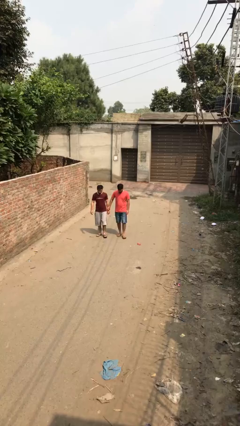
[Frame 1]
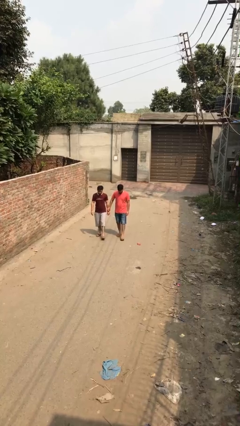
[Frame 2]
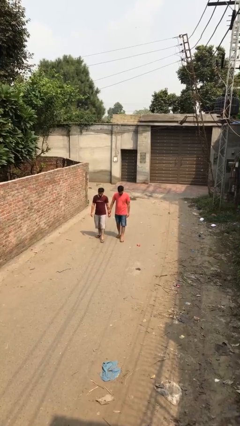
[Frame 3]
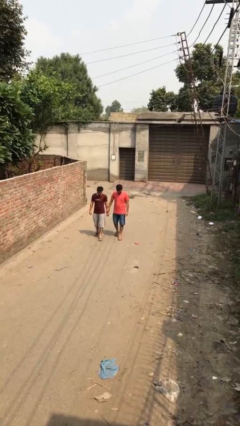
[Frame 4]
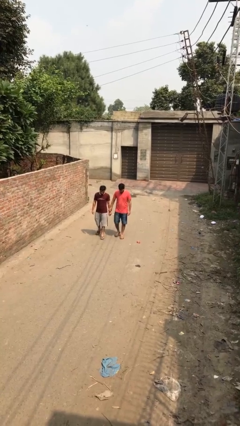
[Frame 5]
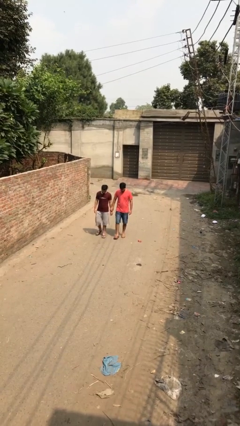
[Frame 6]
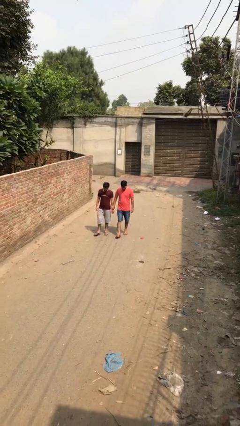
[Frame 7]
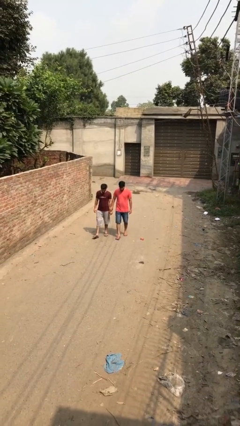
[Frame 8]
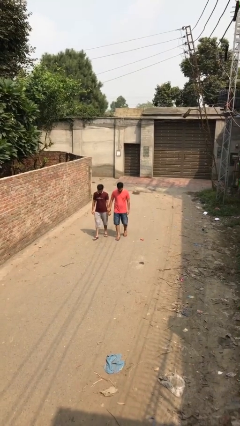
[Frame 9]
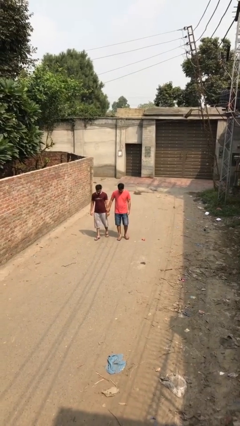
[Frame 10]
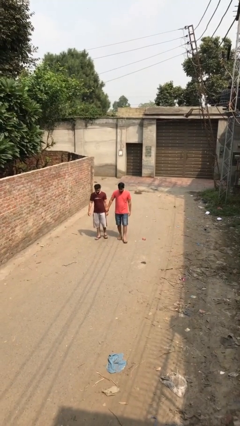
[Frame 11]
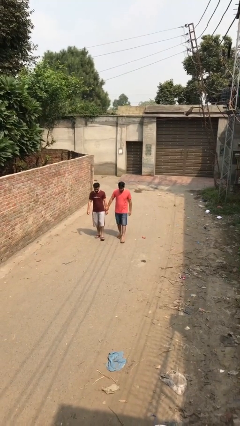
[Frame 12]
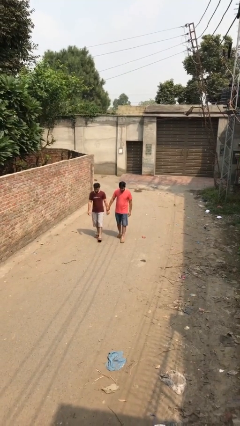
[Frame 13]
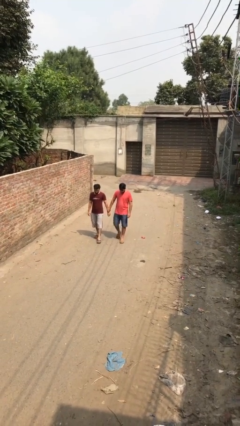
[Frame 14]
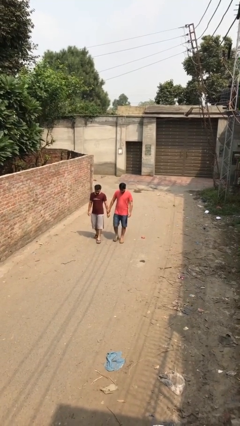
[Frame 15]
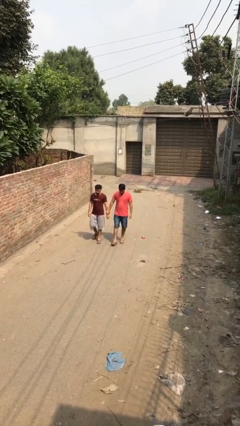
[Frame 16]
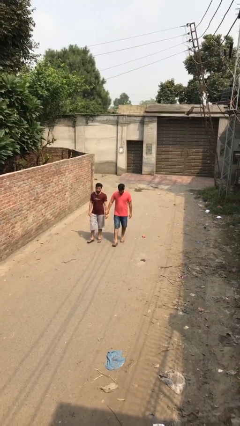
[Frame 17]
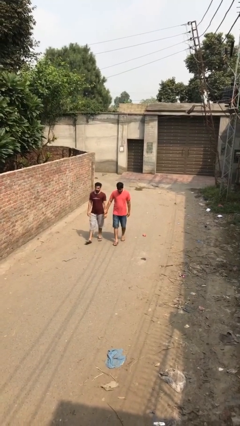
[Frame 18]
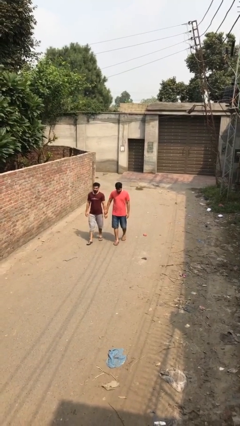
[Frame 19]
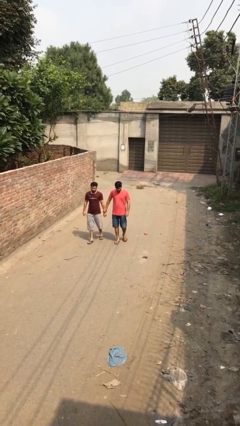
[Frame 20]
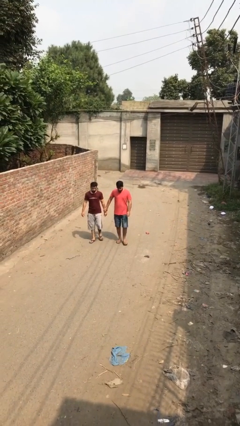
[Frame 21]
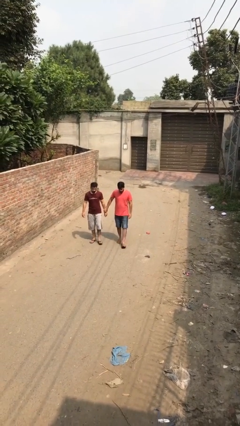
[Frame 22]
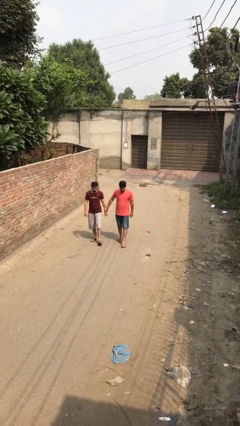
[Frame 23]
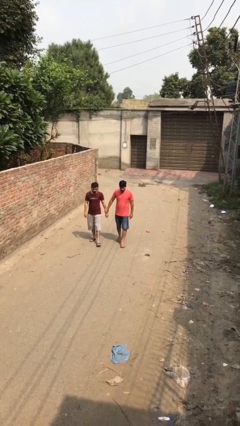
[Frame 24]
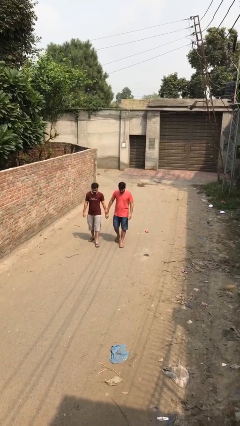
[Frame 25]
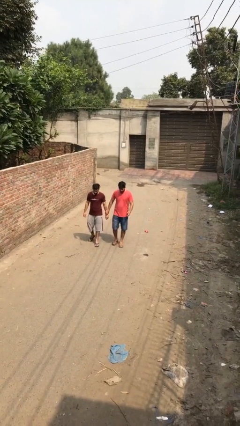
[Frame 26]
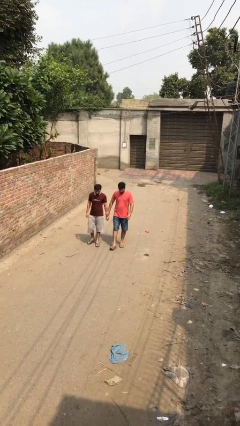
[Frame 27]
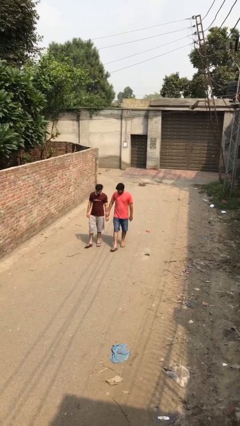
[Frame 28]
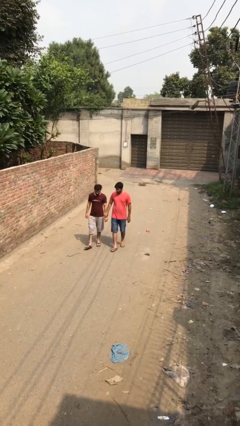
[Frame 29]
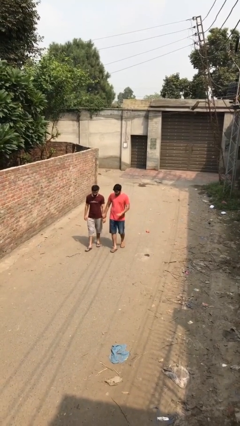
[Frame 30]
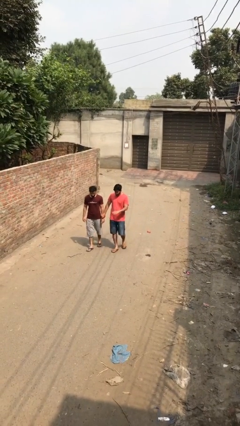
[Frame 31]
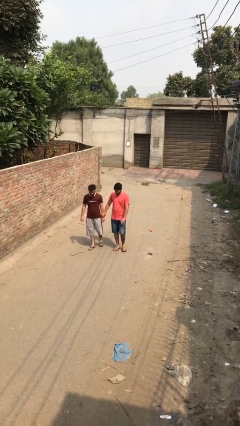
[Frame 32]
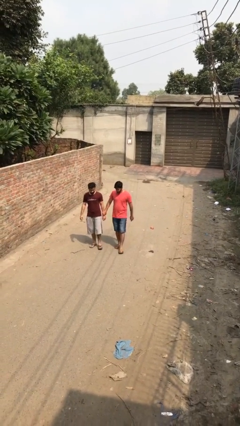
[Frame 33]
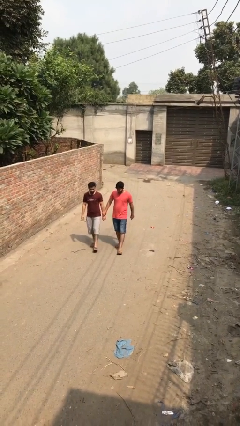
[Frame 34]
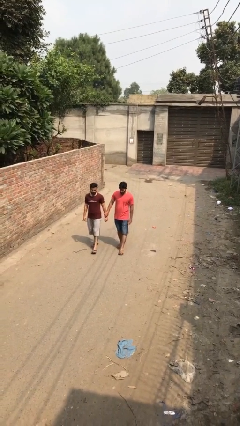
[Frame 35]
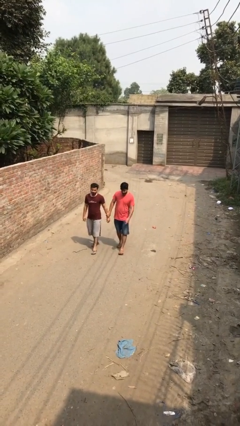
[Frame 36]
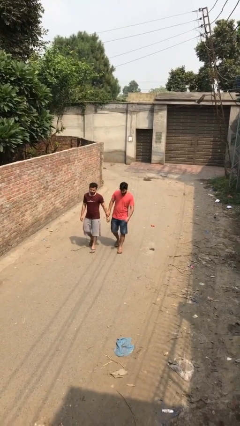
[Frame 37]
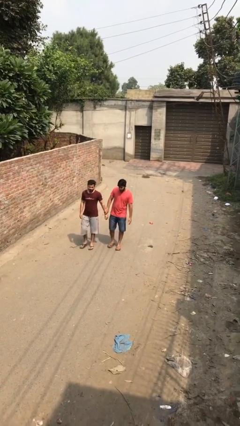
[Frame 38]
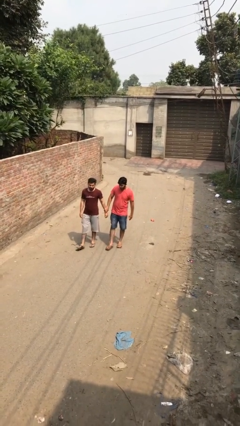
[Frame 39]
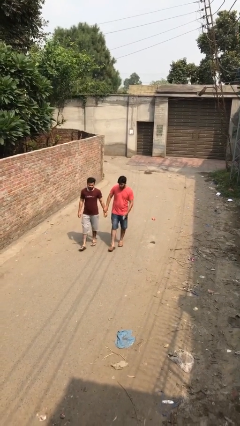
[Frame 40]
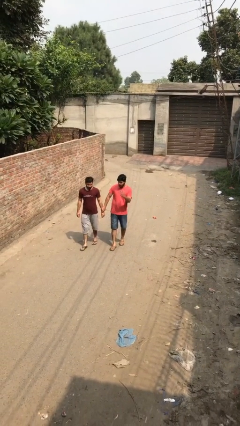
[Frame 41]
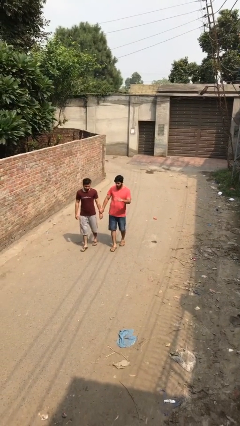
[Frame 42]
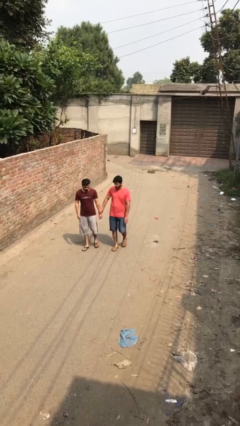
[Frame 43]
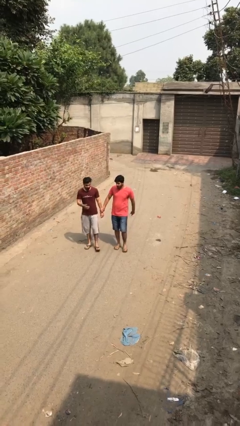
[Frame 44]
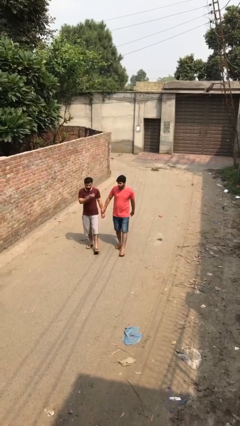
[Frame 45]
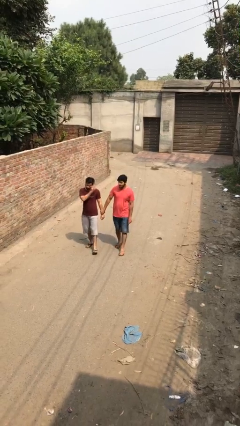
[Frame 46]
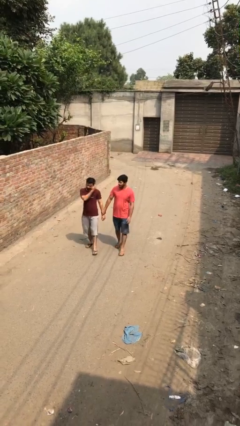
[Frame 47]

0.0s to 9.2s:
person holds hand

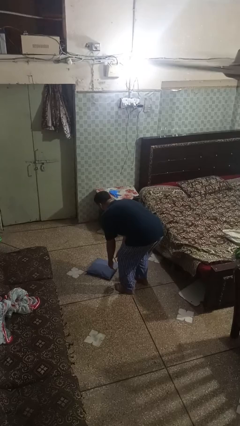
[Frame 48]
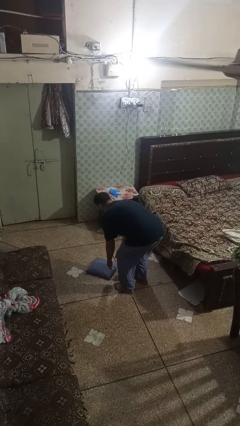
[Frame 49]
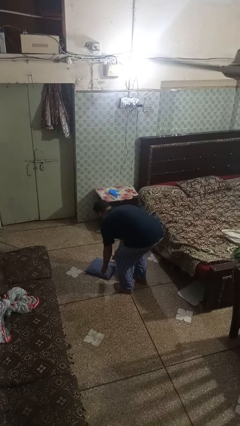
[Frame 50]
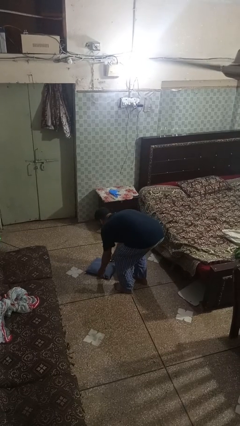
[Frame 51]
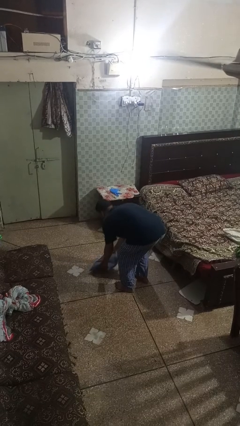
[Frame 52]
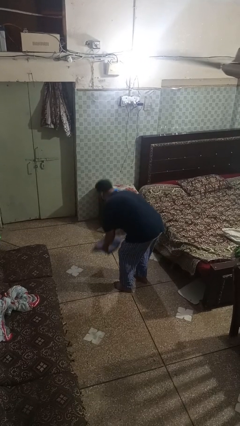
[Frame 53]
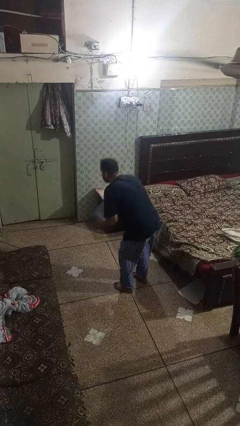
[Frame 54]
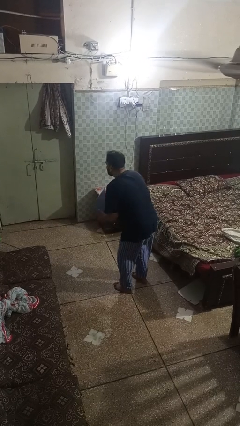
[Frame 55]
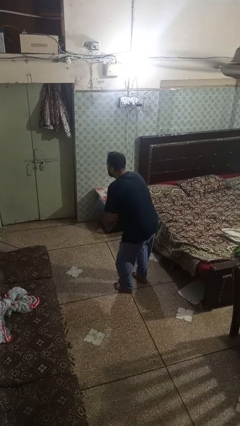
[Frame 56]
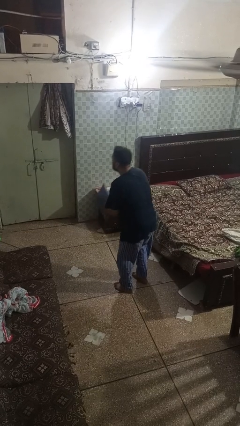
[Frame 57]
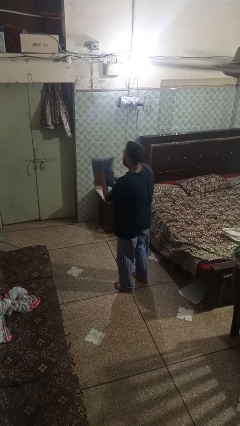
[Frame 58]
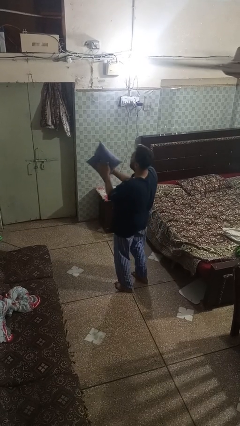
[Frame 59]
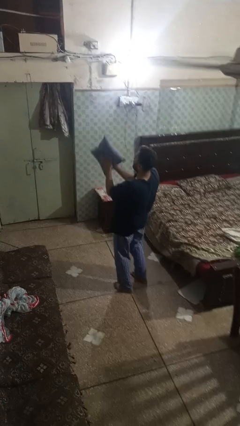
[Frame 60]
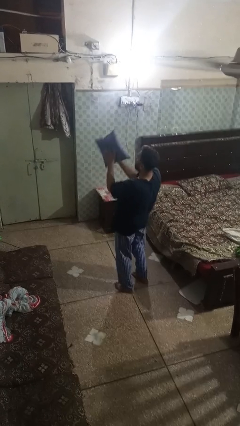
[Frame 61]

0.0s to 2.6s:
person picks up object from floor

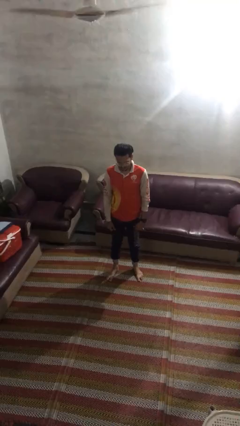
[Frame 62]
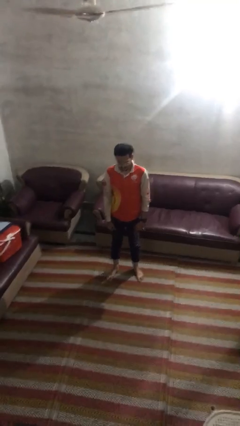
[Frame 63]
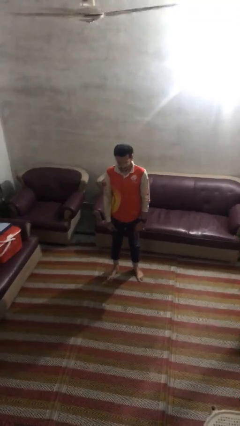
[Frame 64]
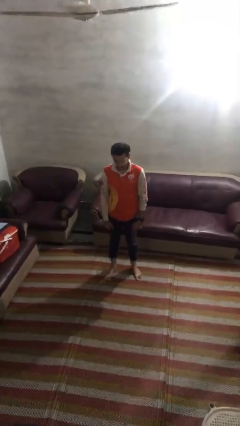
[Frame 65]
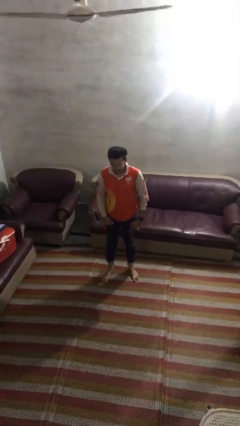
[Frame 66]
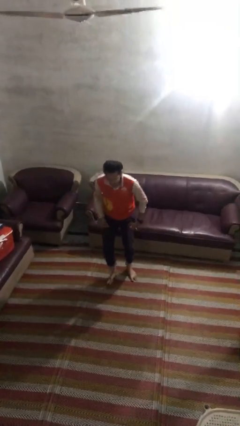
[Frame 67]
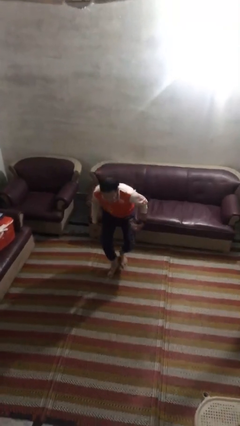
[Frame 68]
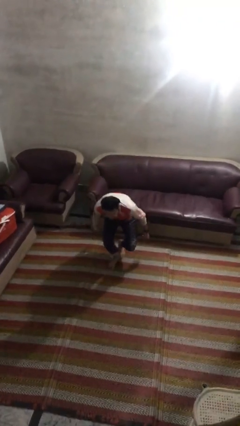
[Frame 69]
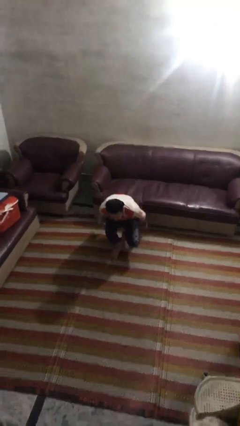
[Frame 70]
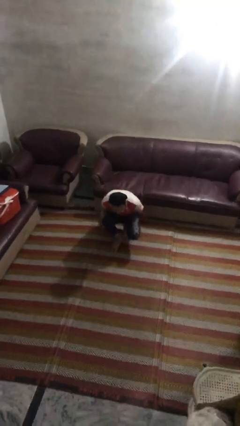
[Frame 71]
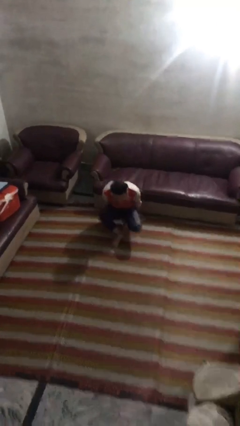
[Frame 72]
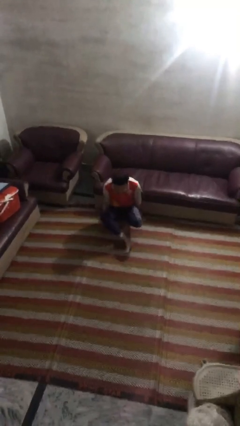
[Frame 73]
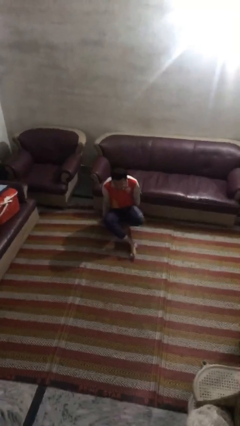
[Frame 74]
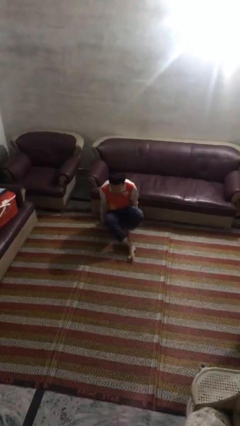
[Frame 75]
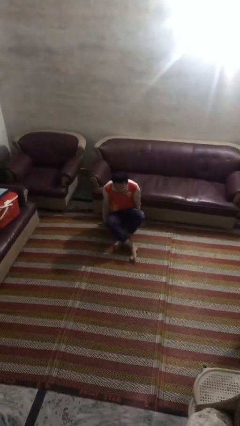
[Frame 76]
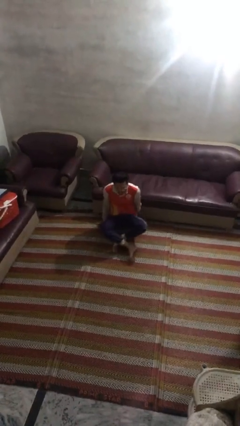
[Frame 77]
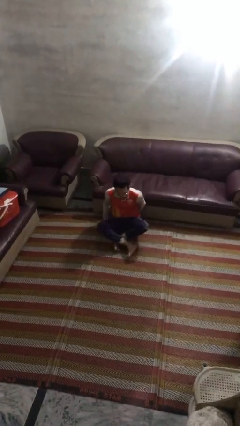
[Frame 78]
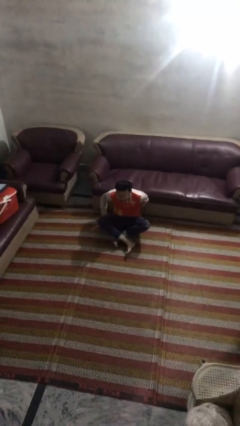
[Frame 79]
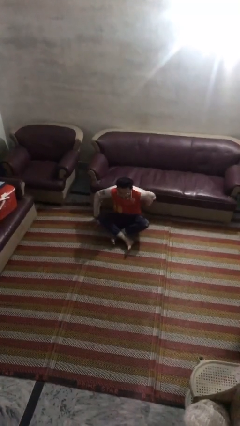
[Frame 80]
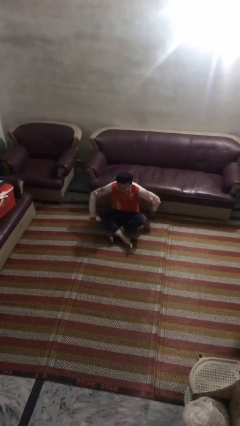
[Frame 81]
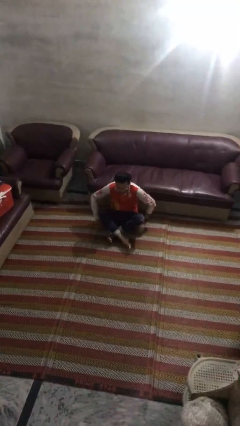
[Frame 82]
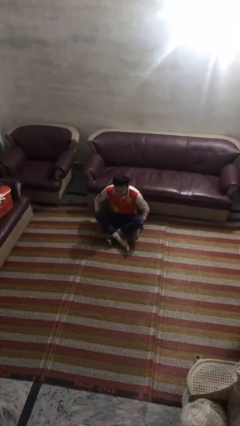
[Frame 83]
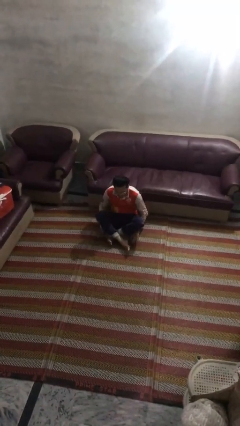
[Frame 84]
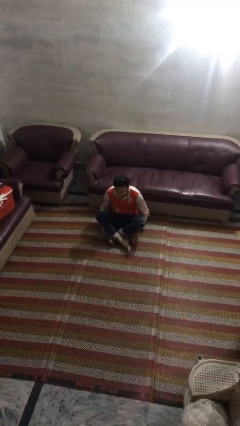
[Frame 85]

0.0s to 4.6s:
person sits crisscross

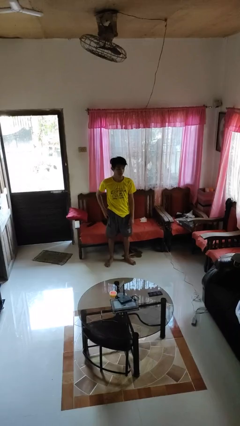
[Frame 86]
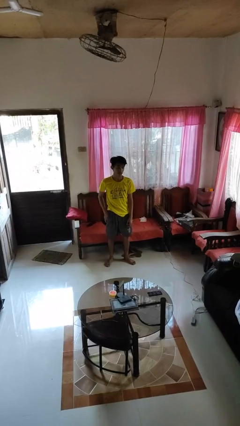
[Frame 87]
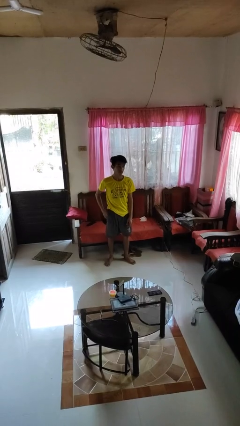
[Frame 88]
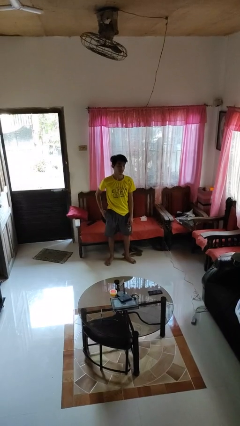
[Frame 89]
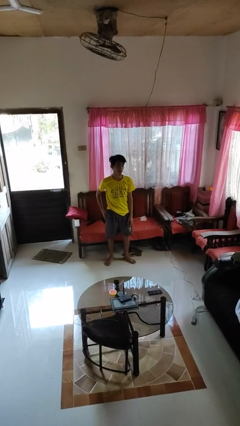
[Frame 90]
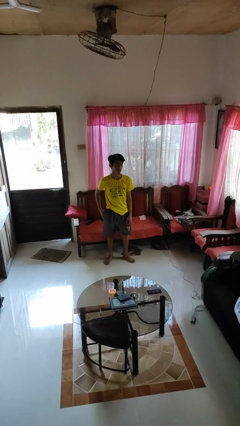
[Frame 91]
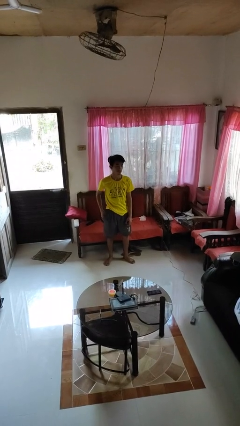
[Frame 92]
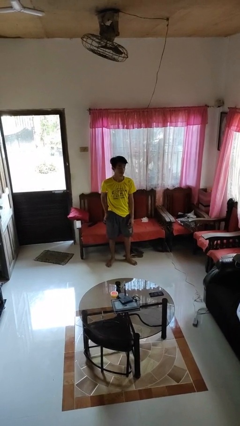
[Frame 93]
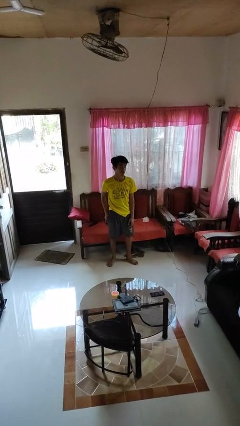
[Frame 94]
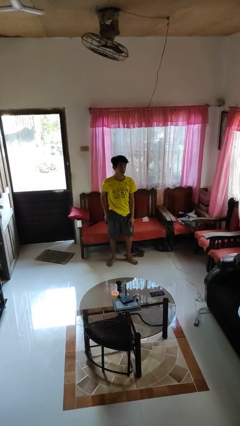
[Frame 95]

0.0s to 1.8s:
person puts phone into pocket
